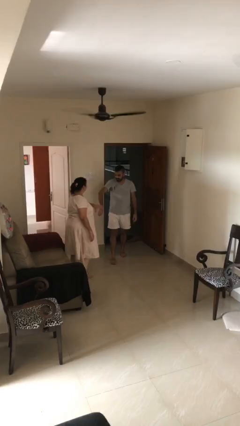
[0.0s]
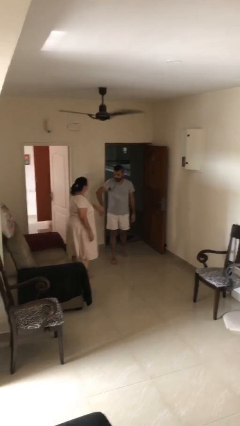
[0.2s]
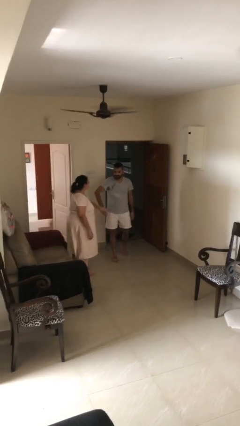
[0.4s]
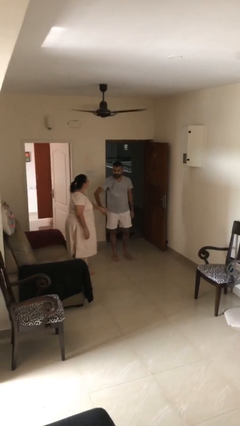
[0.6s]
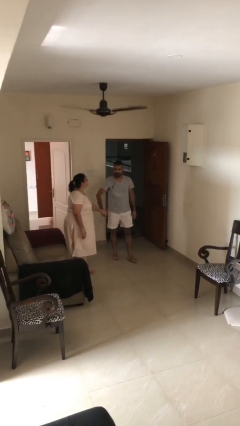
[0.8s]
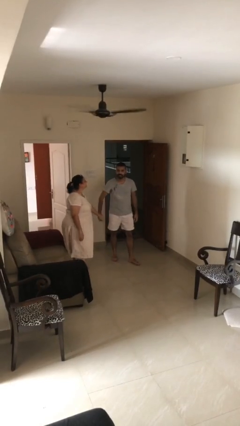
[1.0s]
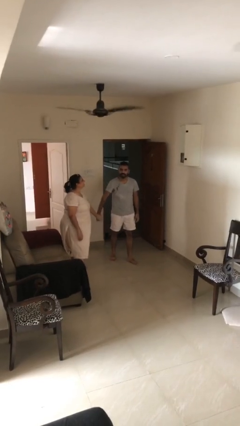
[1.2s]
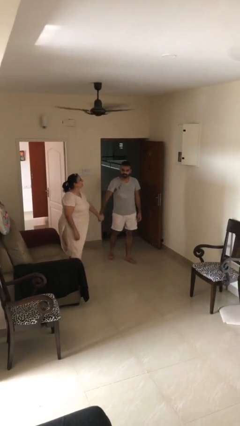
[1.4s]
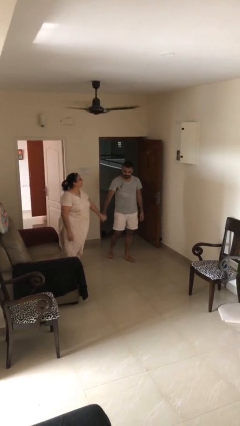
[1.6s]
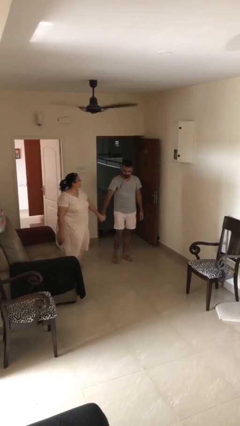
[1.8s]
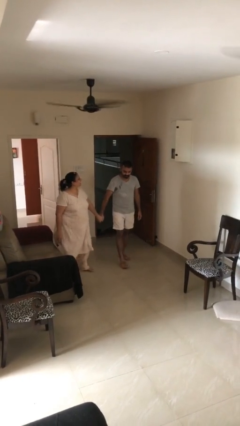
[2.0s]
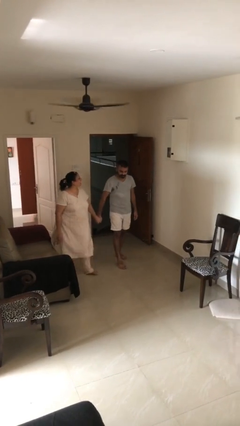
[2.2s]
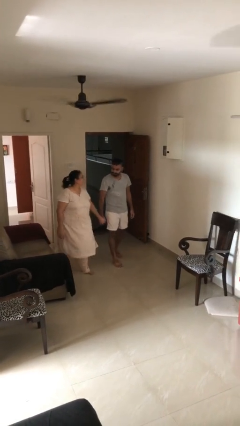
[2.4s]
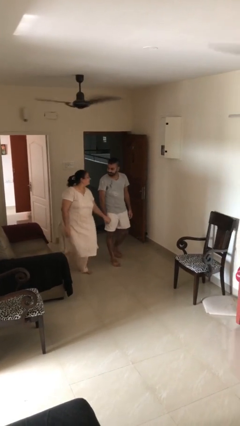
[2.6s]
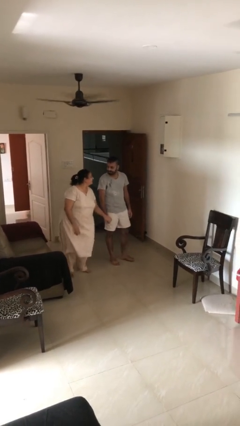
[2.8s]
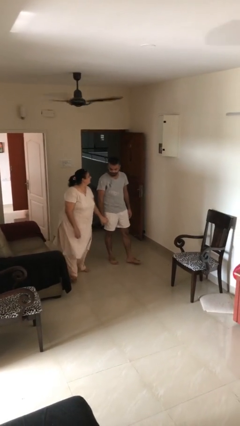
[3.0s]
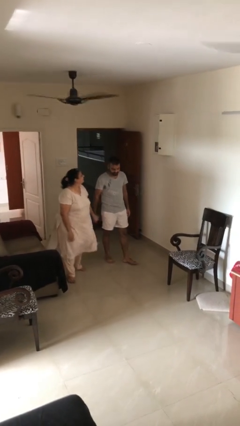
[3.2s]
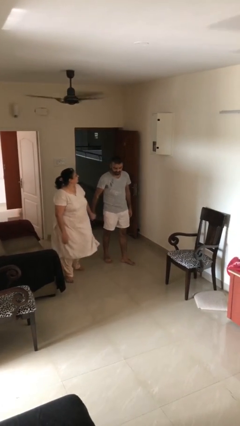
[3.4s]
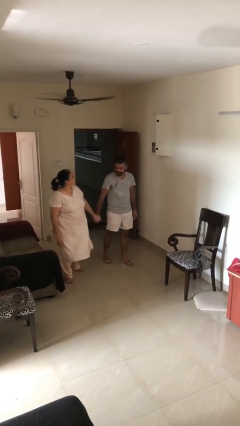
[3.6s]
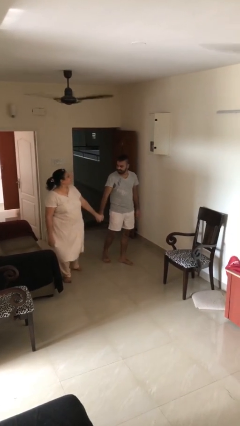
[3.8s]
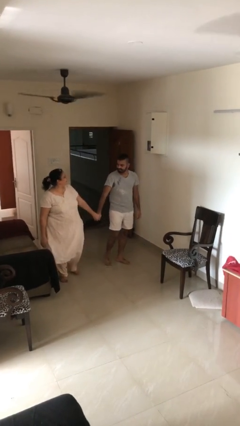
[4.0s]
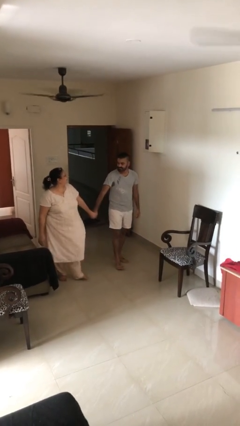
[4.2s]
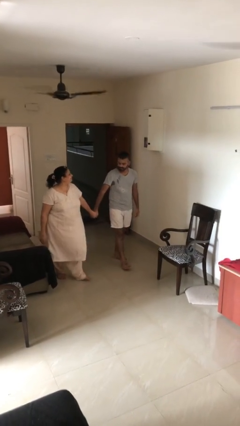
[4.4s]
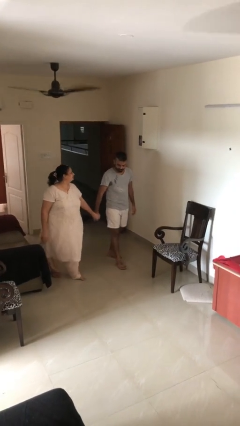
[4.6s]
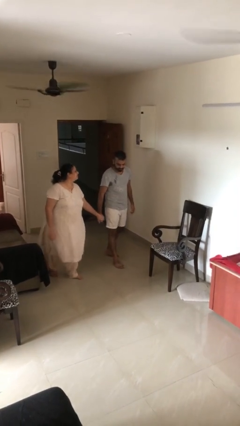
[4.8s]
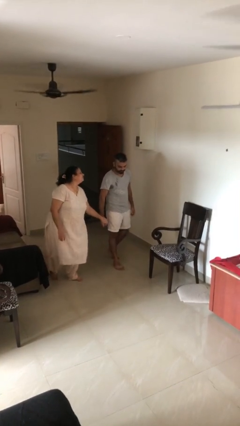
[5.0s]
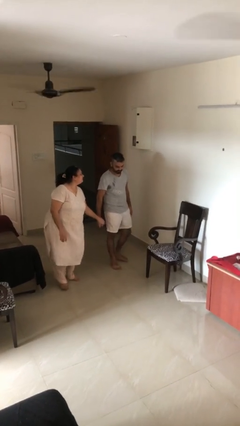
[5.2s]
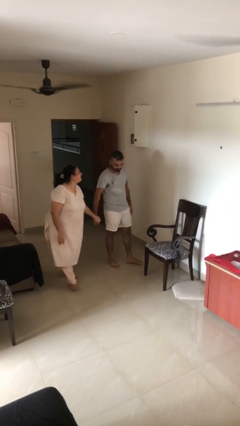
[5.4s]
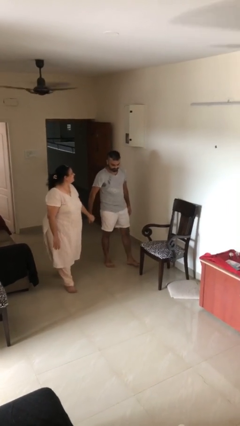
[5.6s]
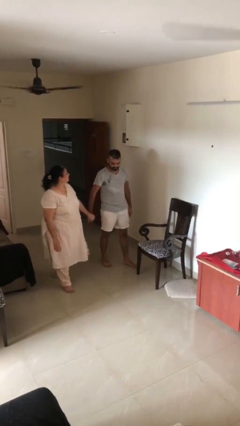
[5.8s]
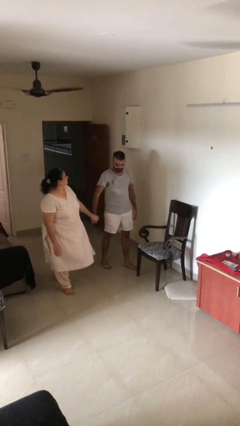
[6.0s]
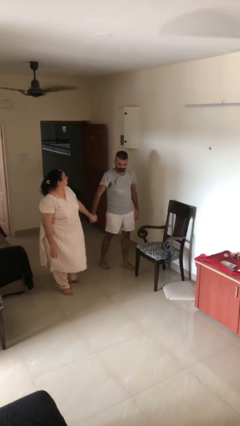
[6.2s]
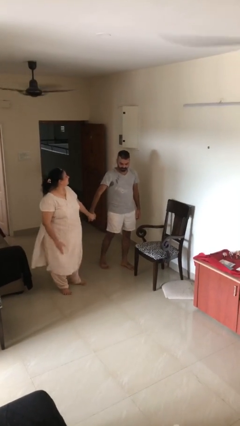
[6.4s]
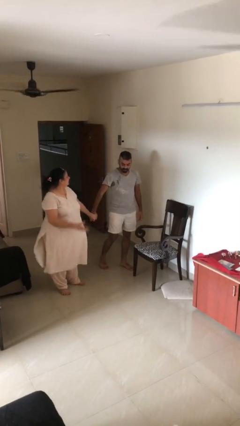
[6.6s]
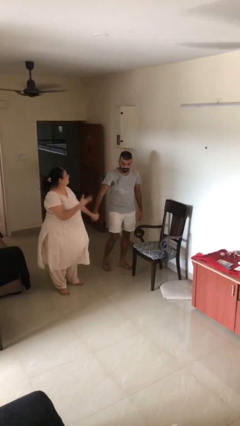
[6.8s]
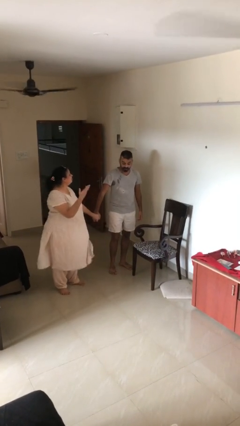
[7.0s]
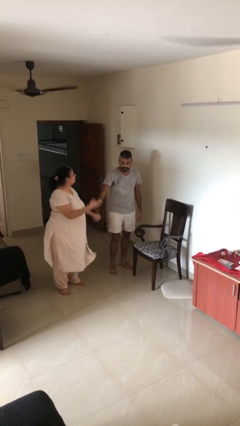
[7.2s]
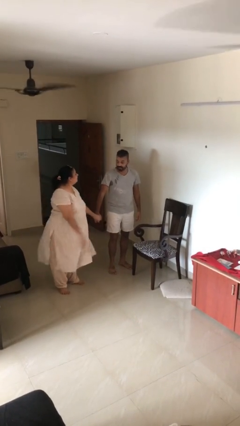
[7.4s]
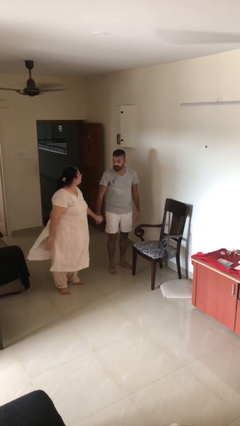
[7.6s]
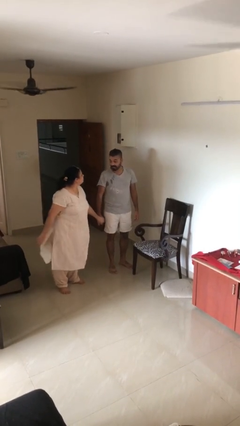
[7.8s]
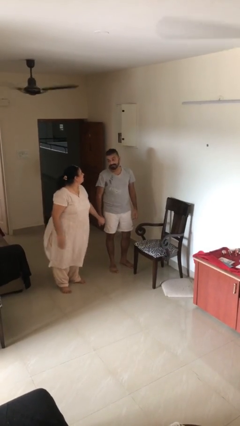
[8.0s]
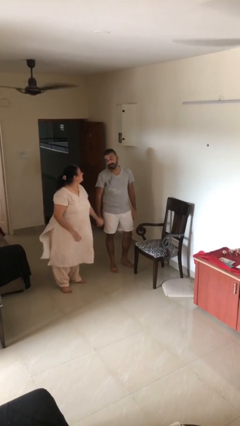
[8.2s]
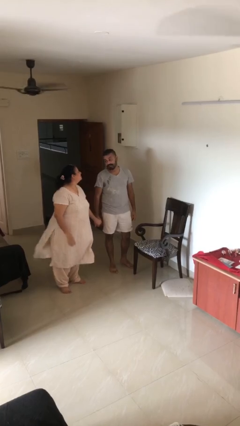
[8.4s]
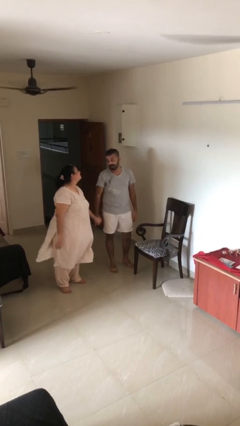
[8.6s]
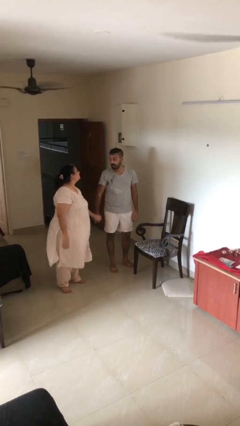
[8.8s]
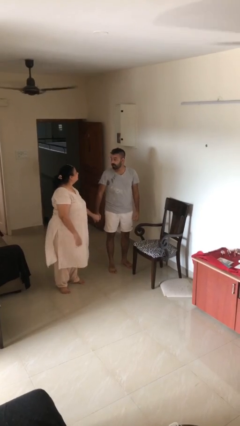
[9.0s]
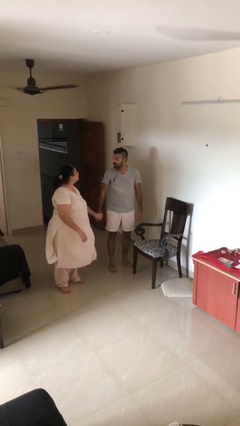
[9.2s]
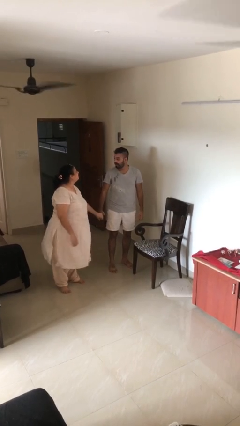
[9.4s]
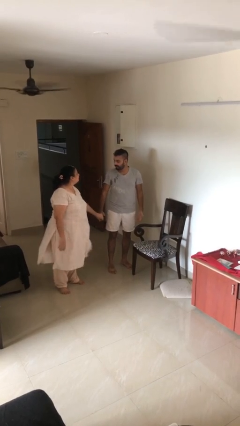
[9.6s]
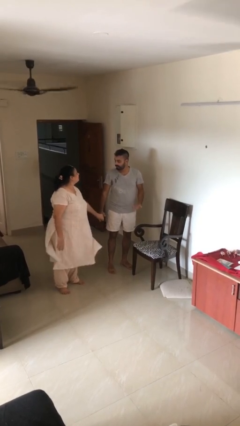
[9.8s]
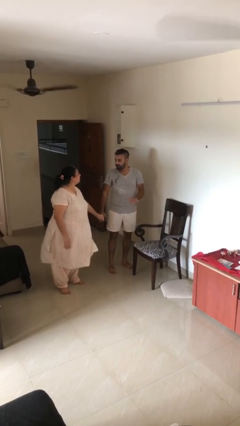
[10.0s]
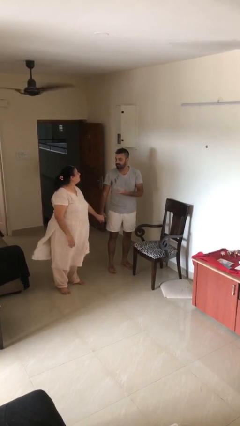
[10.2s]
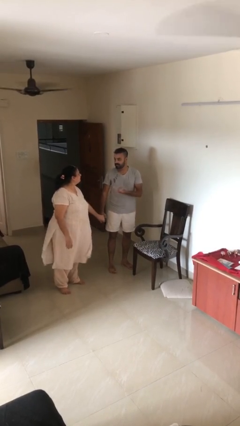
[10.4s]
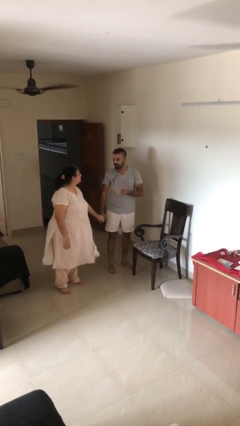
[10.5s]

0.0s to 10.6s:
person holds hand

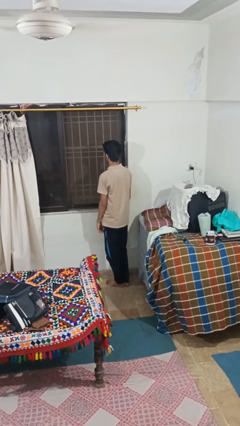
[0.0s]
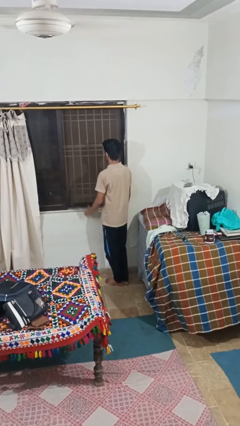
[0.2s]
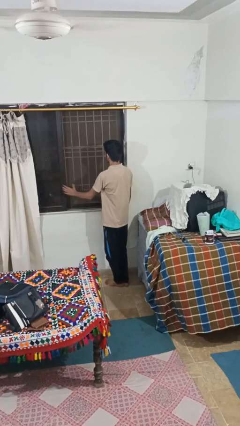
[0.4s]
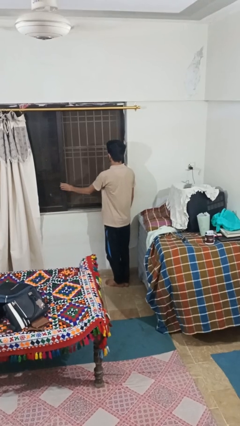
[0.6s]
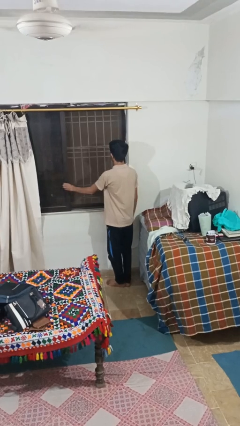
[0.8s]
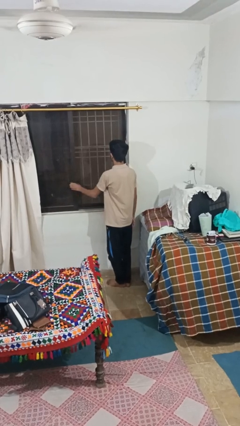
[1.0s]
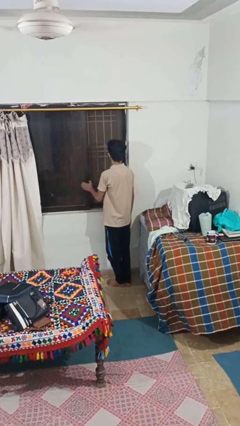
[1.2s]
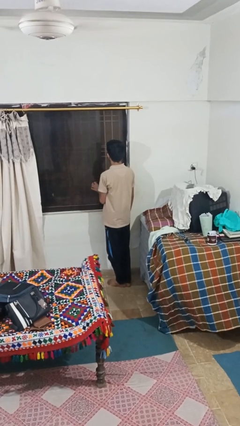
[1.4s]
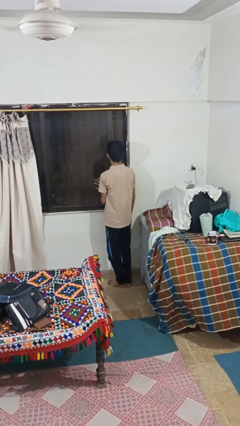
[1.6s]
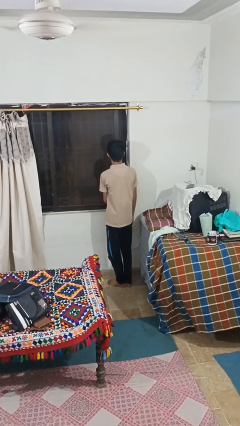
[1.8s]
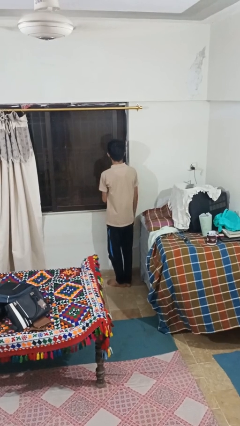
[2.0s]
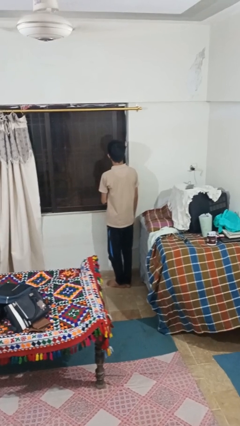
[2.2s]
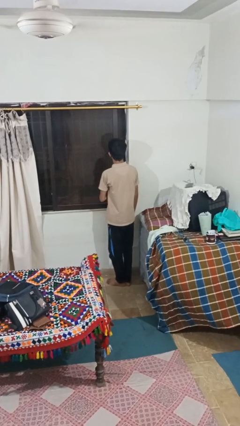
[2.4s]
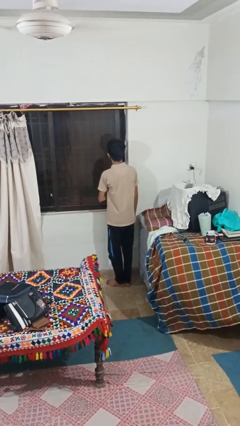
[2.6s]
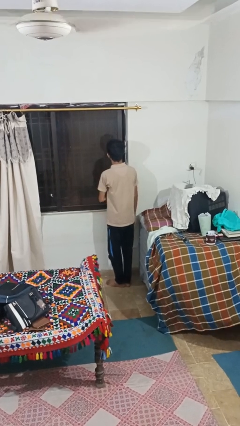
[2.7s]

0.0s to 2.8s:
person closes sliding door

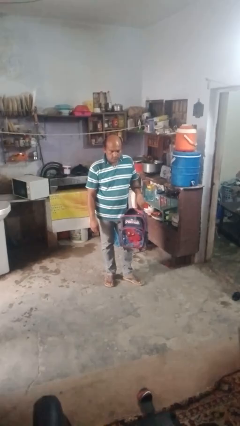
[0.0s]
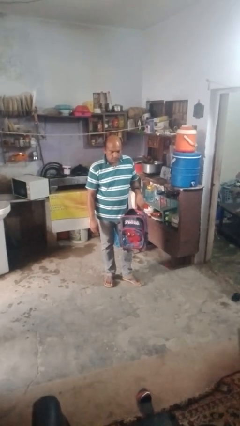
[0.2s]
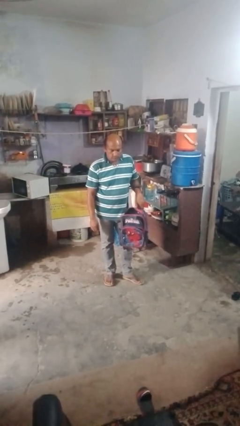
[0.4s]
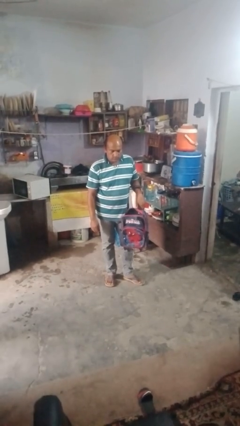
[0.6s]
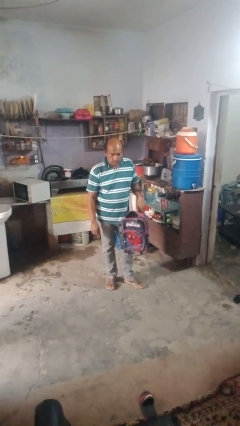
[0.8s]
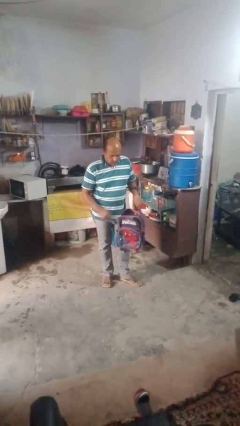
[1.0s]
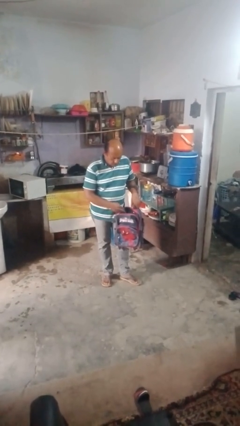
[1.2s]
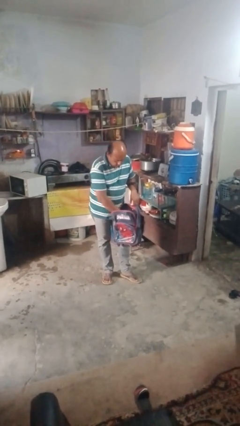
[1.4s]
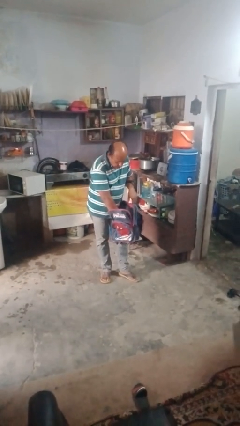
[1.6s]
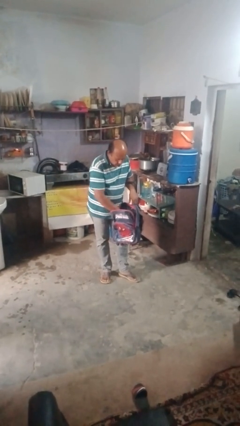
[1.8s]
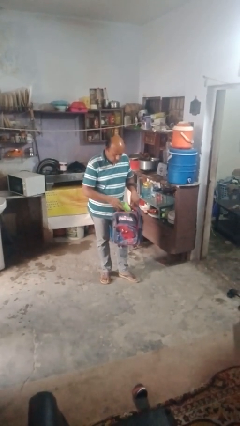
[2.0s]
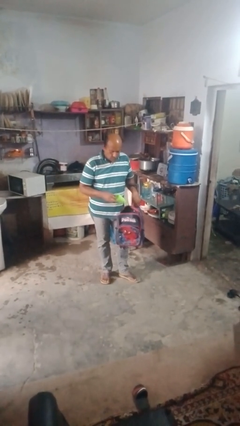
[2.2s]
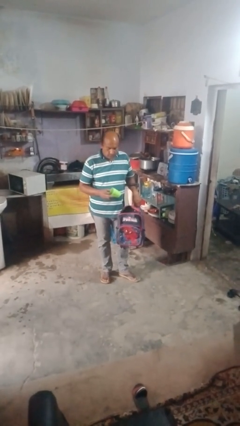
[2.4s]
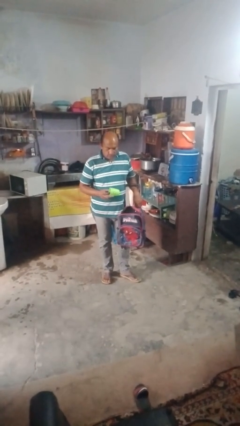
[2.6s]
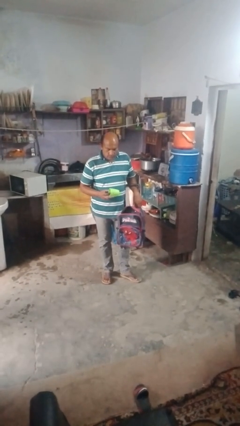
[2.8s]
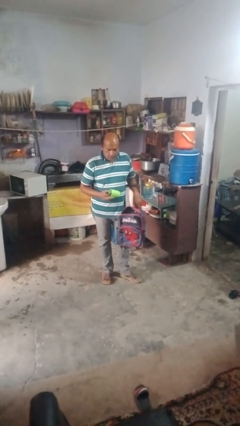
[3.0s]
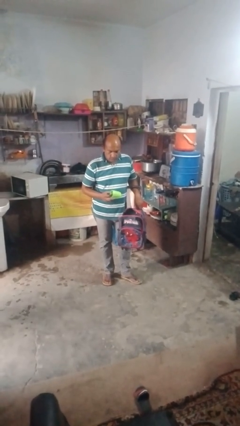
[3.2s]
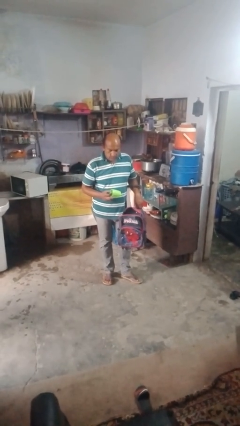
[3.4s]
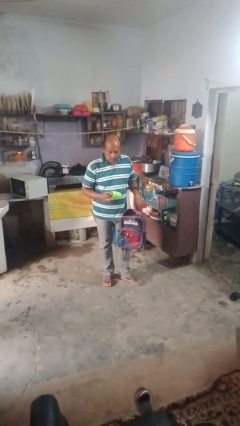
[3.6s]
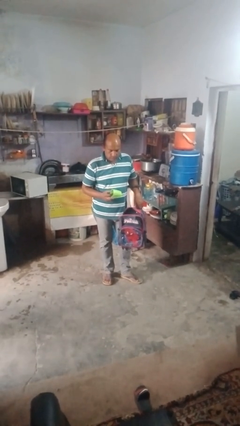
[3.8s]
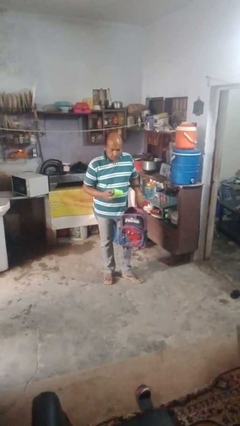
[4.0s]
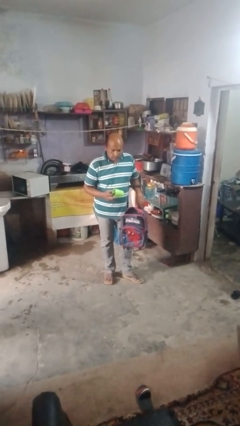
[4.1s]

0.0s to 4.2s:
person takes object from bag
